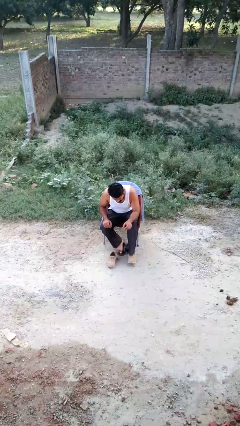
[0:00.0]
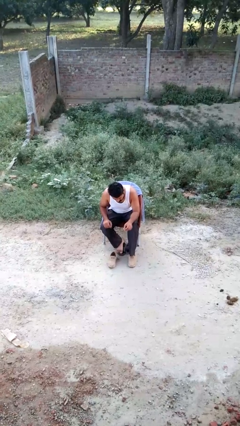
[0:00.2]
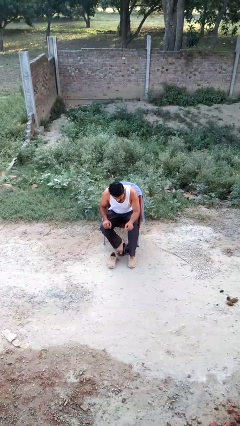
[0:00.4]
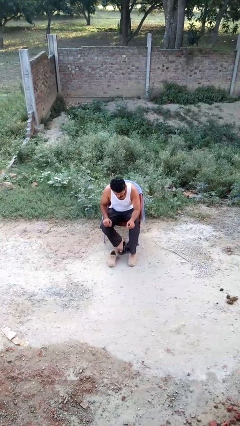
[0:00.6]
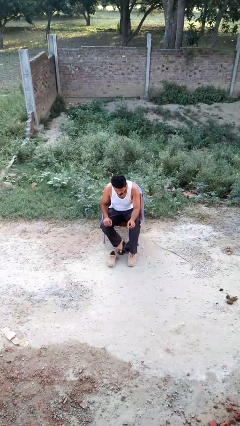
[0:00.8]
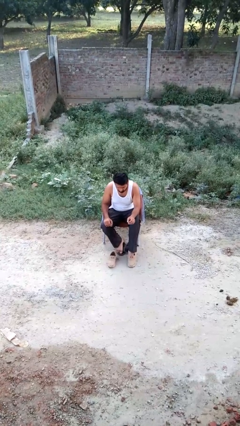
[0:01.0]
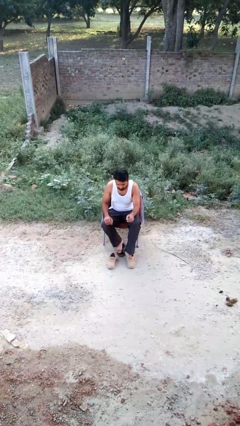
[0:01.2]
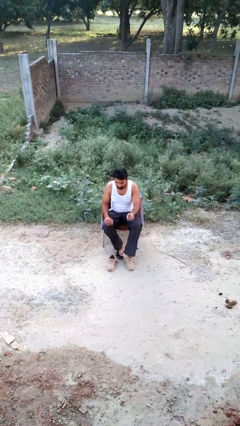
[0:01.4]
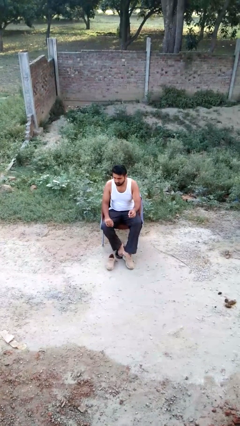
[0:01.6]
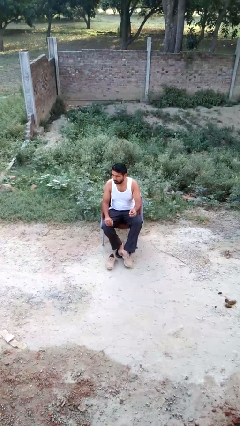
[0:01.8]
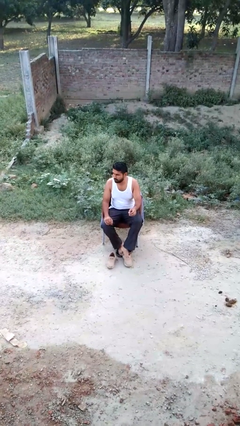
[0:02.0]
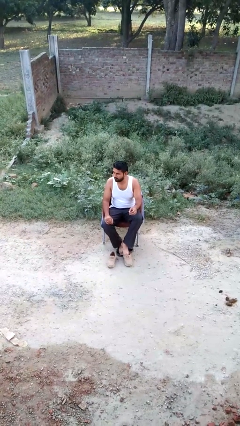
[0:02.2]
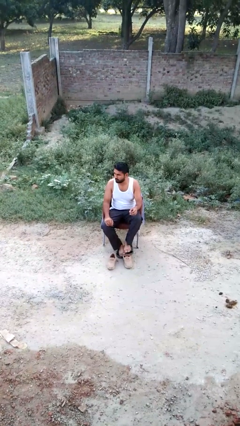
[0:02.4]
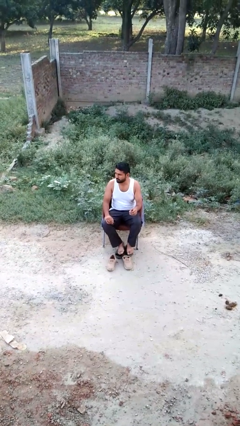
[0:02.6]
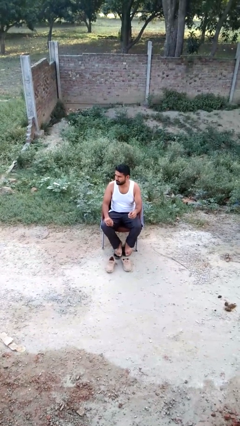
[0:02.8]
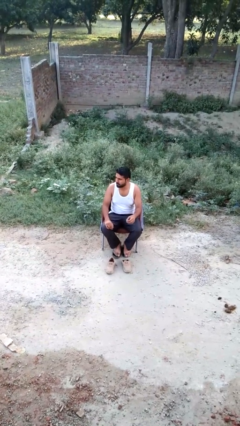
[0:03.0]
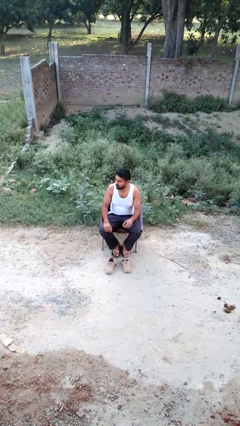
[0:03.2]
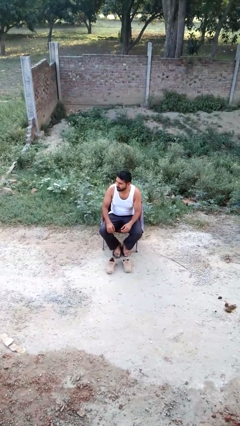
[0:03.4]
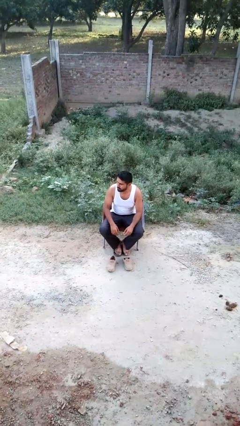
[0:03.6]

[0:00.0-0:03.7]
person takes off shoes

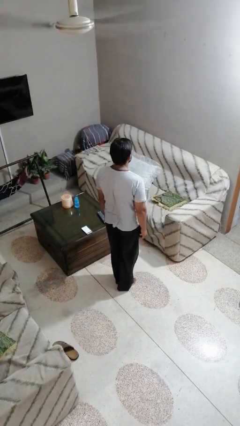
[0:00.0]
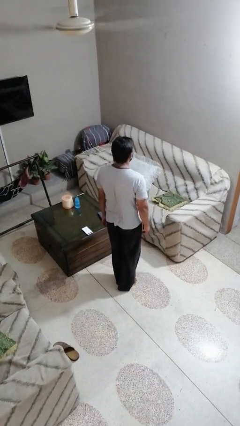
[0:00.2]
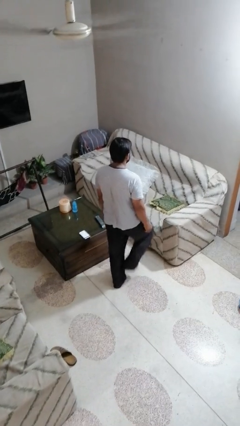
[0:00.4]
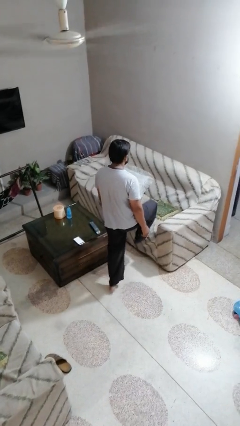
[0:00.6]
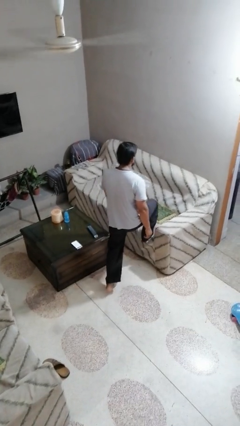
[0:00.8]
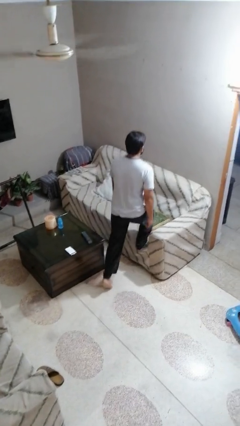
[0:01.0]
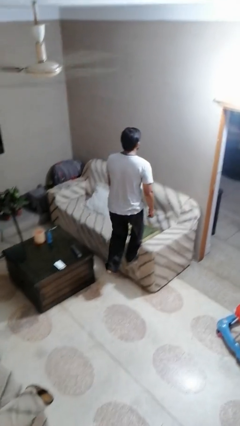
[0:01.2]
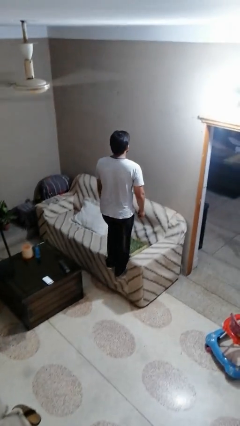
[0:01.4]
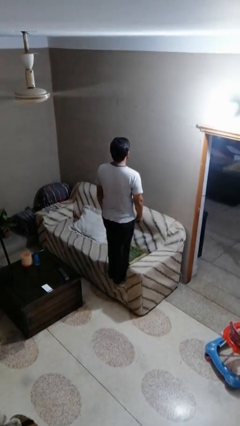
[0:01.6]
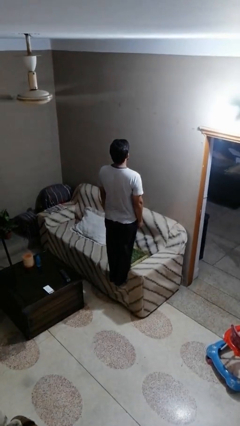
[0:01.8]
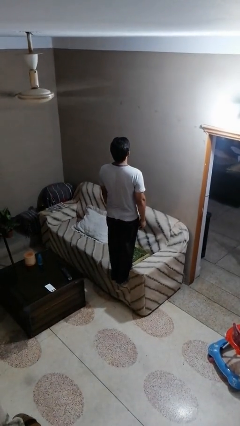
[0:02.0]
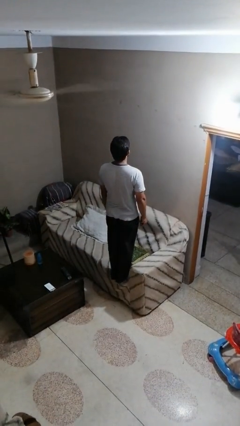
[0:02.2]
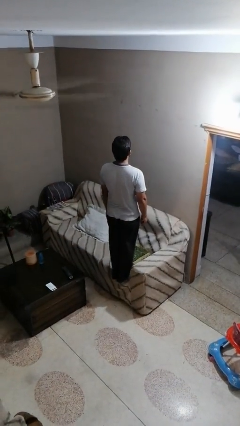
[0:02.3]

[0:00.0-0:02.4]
person climbs on couch

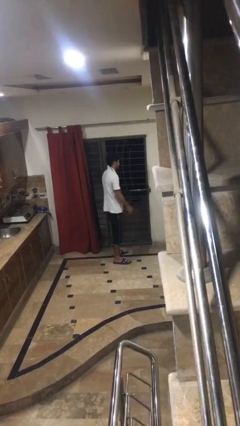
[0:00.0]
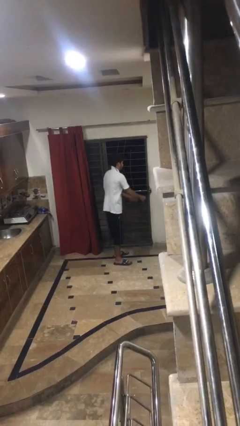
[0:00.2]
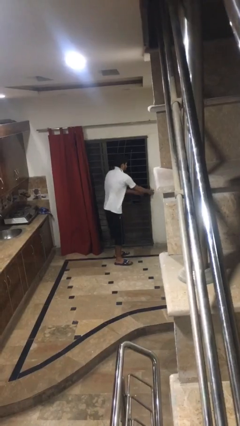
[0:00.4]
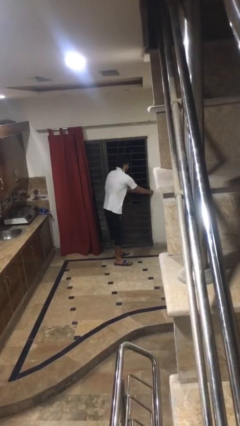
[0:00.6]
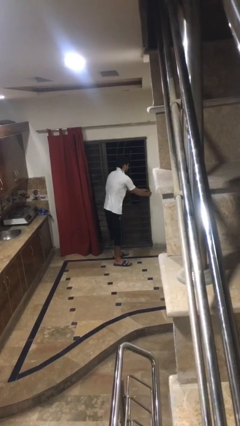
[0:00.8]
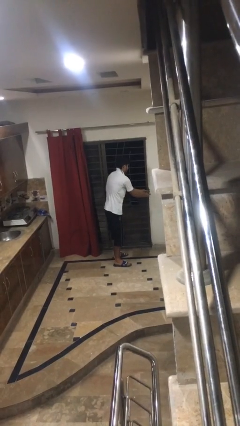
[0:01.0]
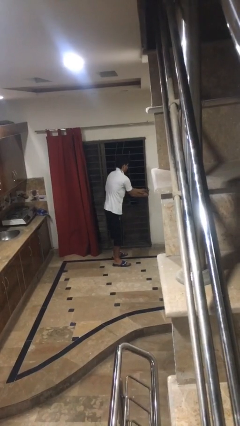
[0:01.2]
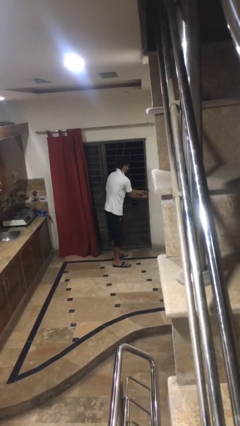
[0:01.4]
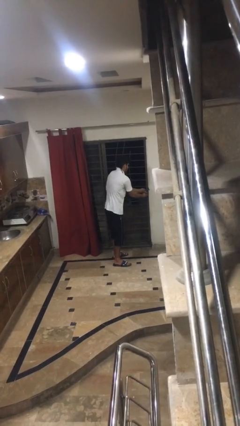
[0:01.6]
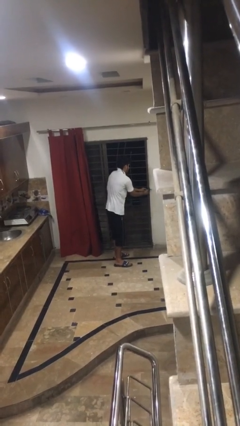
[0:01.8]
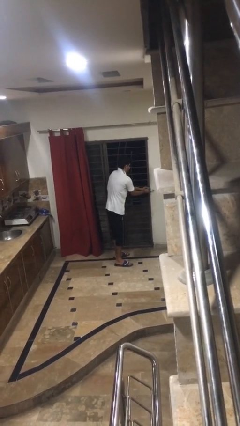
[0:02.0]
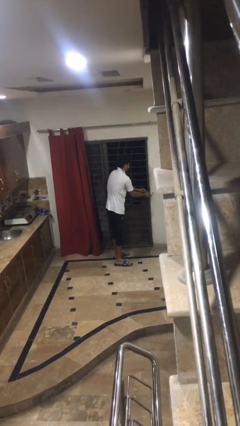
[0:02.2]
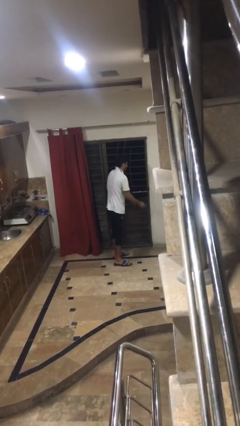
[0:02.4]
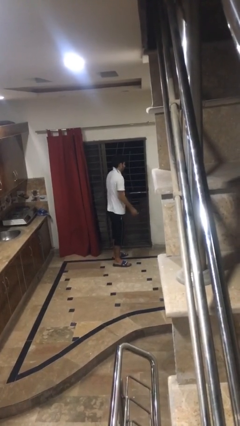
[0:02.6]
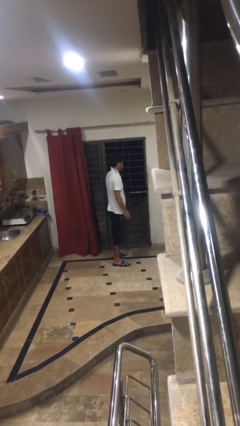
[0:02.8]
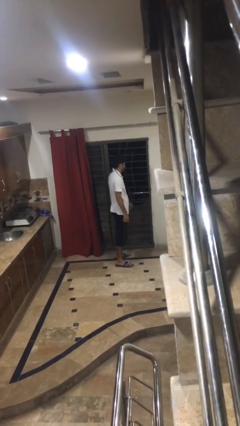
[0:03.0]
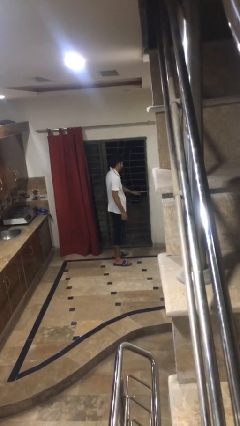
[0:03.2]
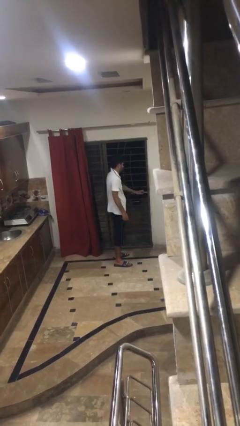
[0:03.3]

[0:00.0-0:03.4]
person unlocks door with keys

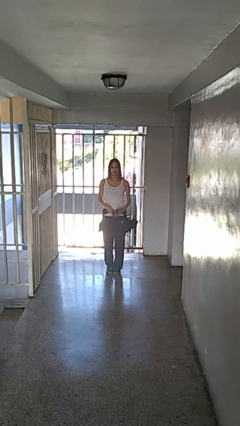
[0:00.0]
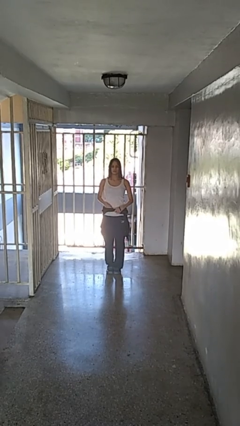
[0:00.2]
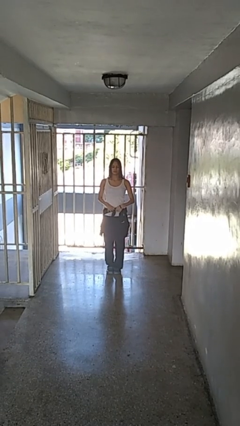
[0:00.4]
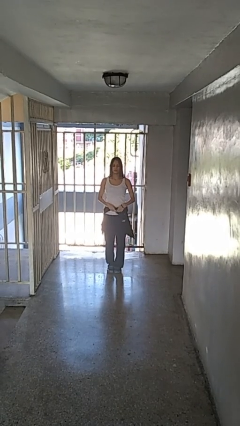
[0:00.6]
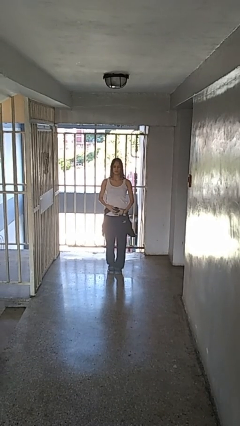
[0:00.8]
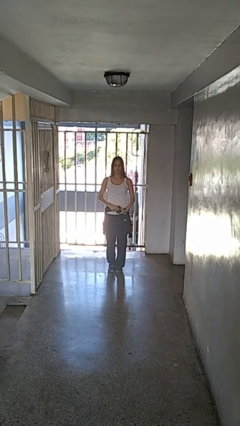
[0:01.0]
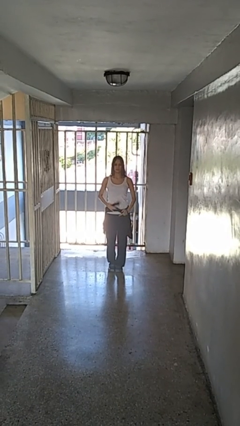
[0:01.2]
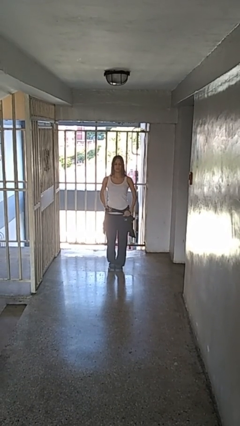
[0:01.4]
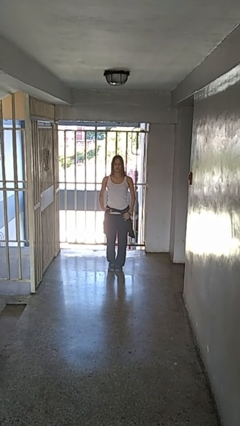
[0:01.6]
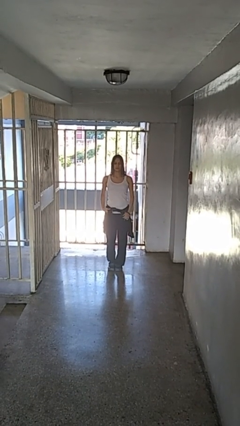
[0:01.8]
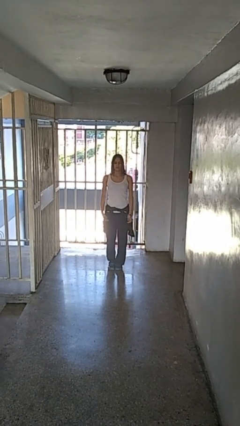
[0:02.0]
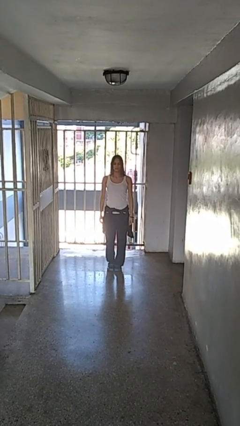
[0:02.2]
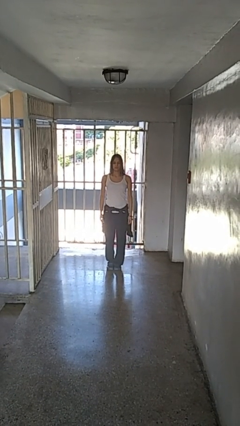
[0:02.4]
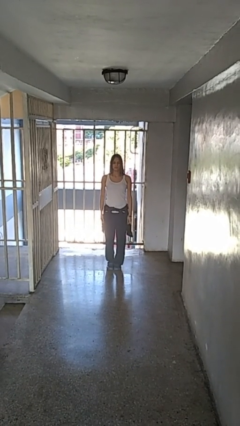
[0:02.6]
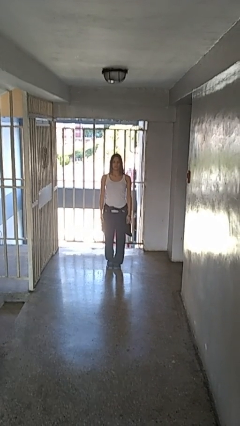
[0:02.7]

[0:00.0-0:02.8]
person ties jacket around waist

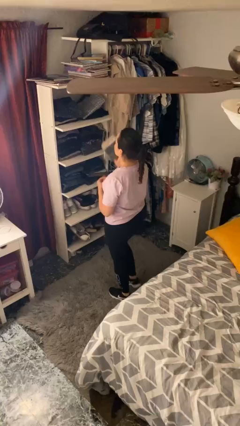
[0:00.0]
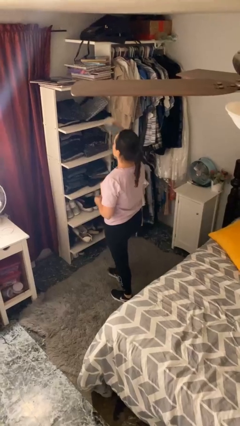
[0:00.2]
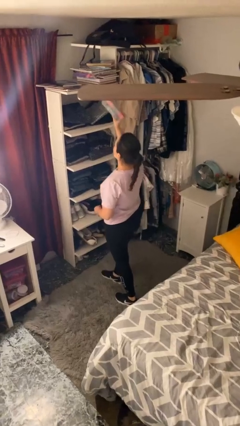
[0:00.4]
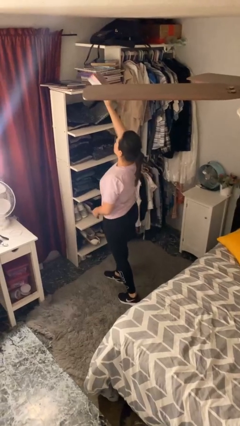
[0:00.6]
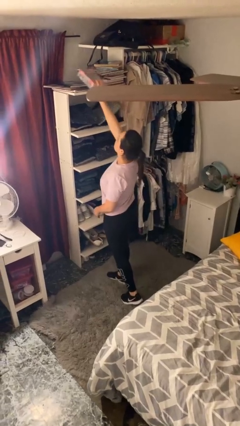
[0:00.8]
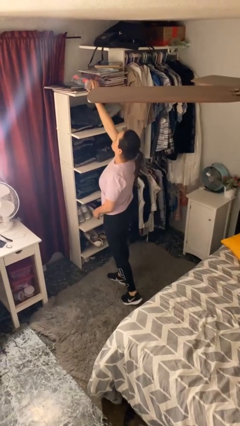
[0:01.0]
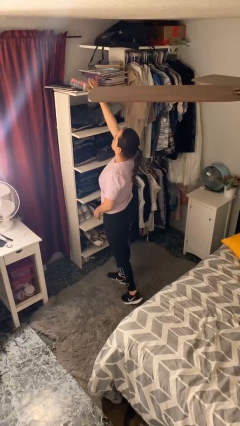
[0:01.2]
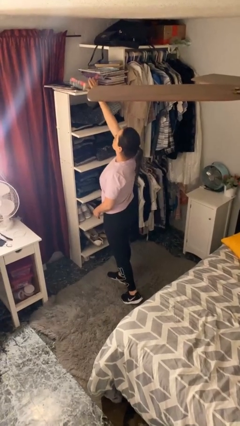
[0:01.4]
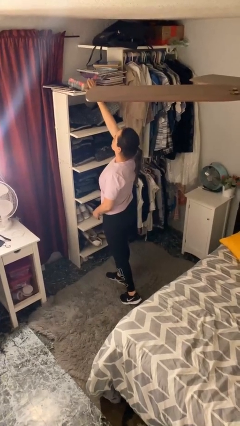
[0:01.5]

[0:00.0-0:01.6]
person puts down object on shelf

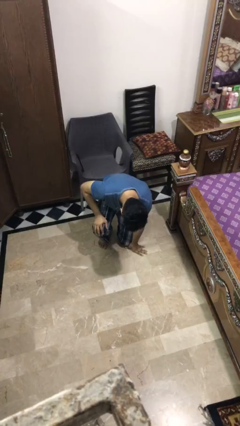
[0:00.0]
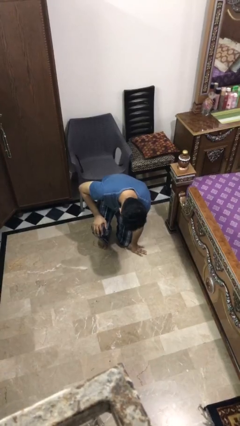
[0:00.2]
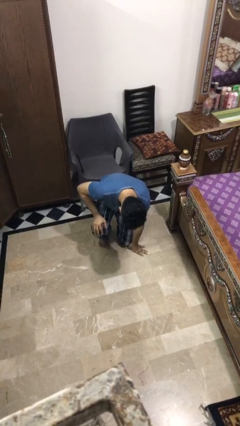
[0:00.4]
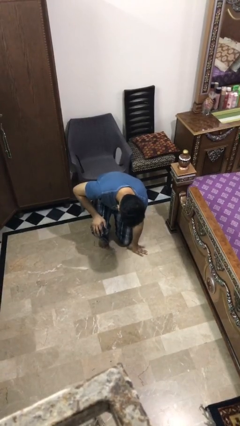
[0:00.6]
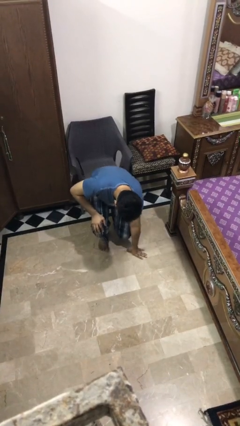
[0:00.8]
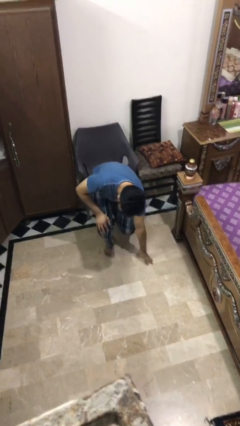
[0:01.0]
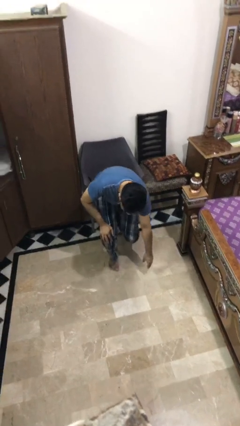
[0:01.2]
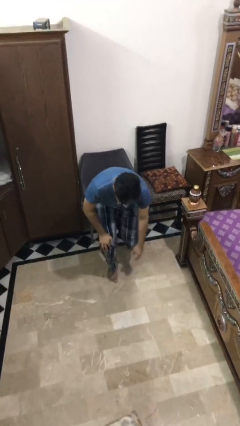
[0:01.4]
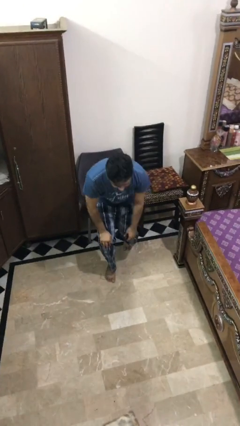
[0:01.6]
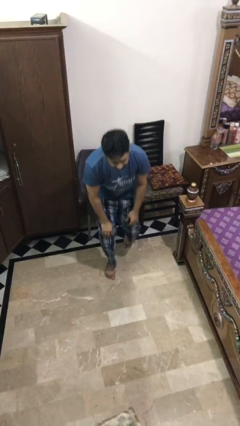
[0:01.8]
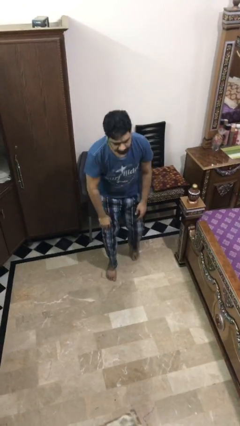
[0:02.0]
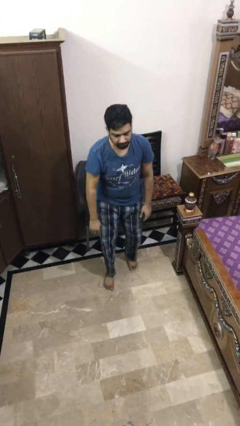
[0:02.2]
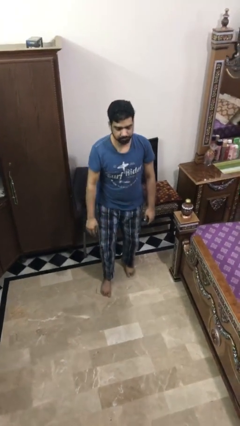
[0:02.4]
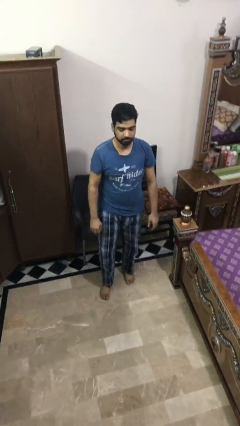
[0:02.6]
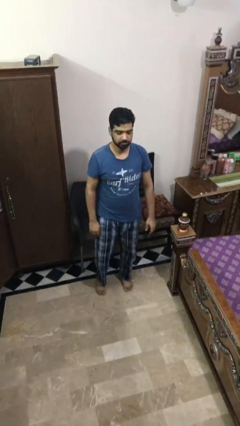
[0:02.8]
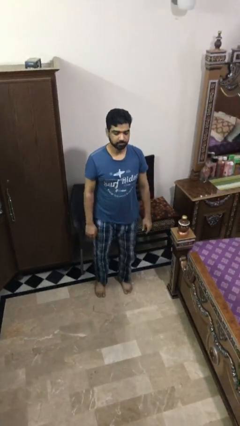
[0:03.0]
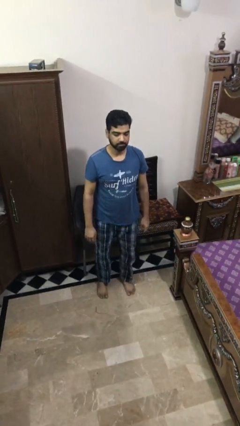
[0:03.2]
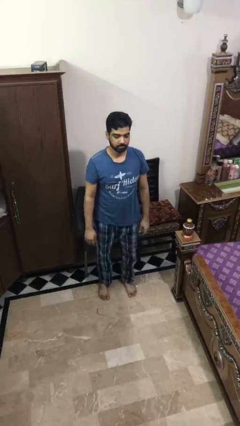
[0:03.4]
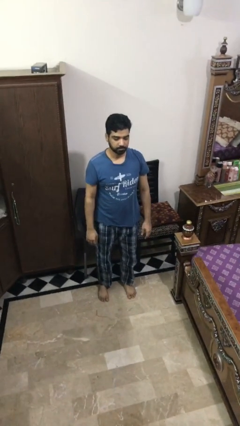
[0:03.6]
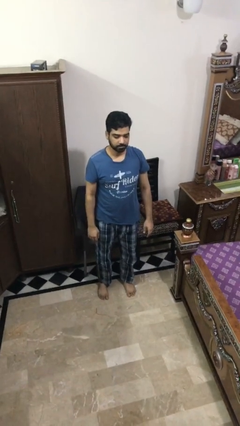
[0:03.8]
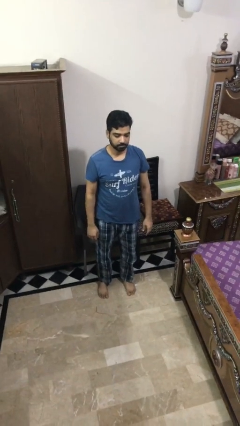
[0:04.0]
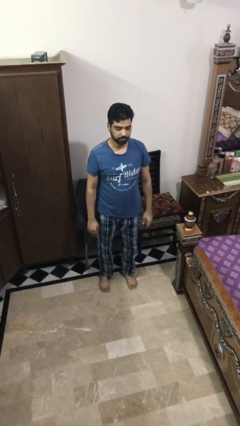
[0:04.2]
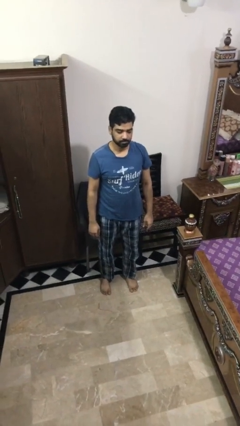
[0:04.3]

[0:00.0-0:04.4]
person stands up from floor
